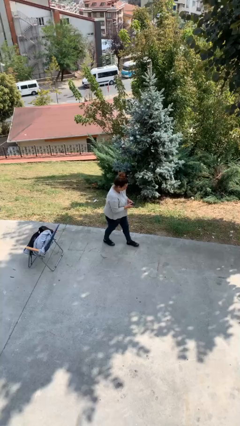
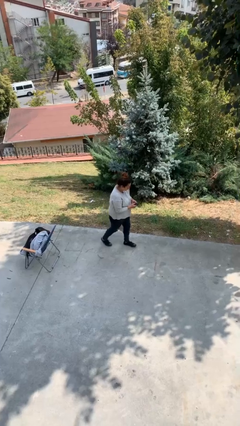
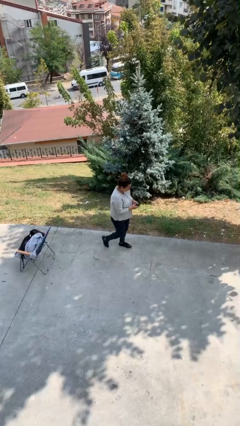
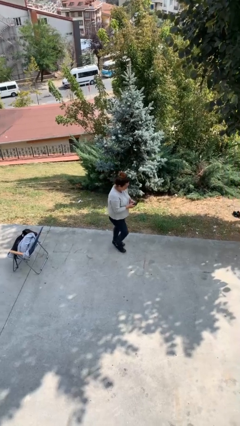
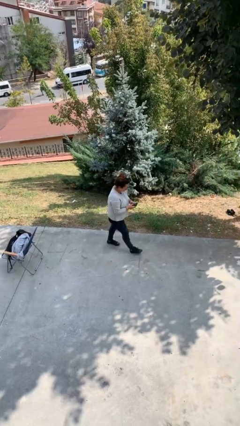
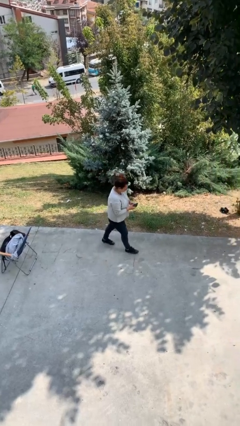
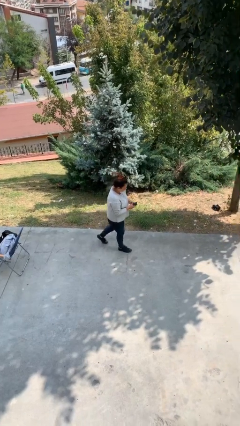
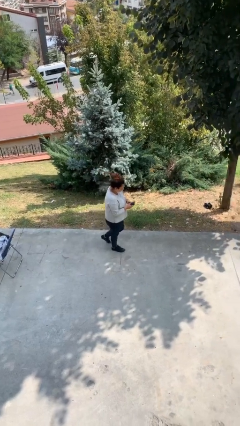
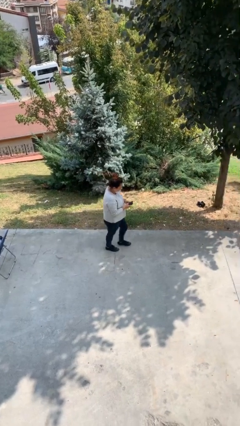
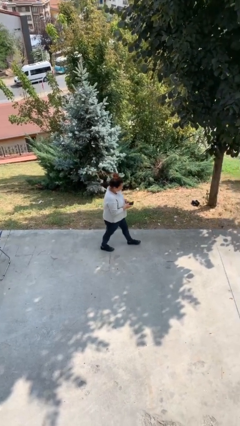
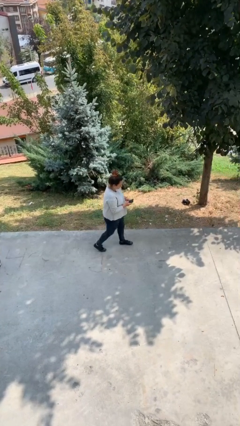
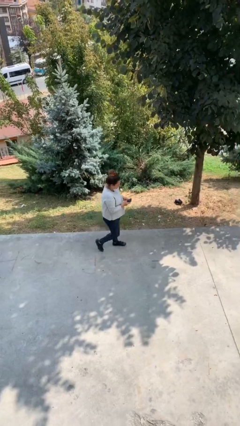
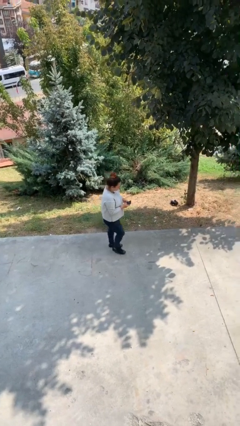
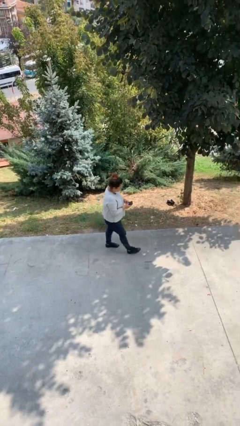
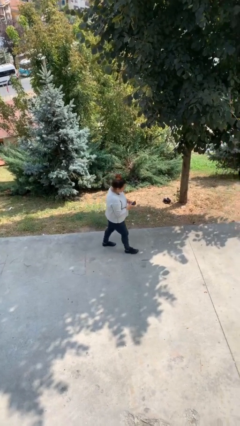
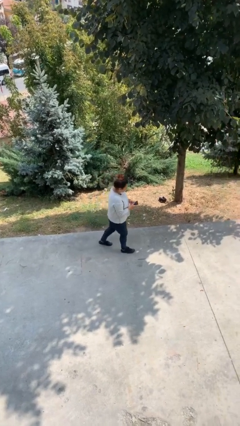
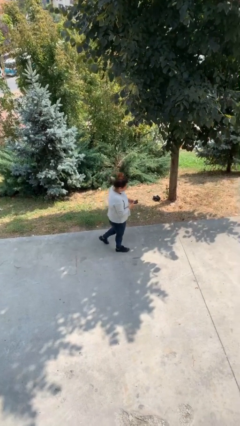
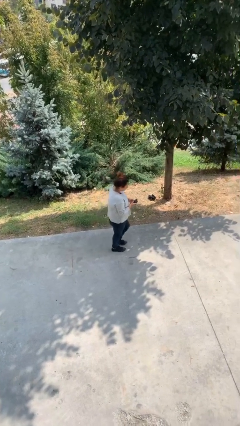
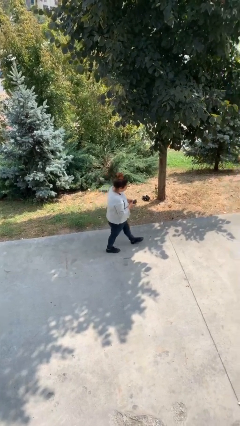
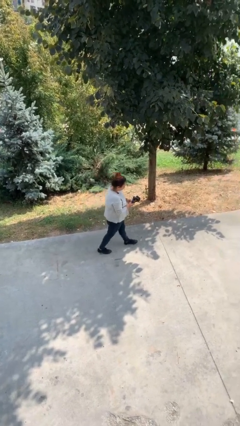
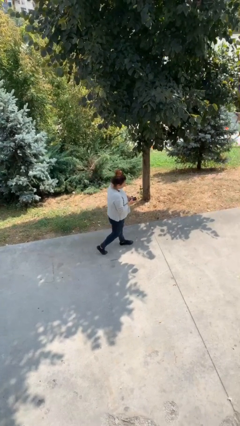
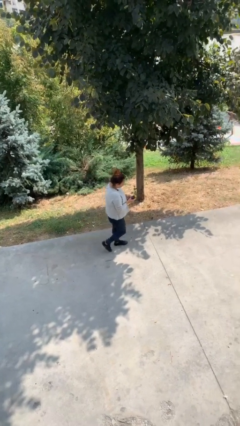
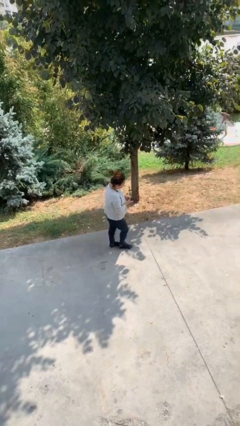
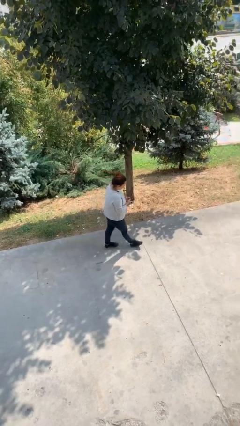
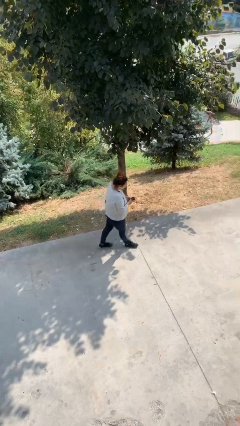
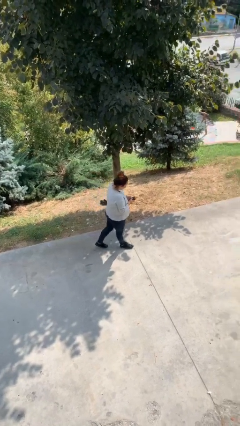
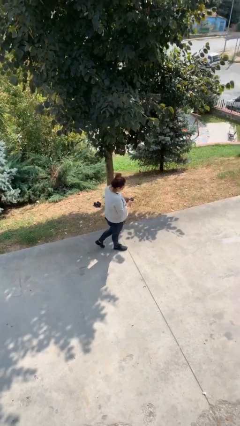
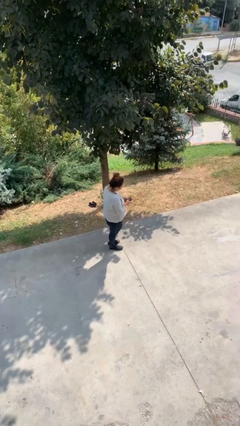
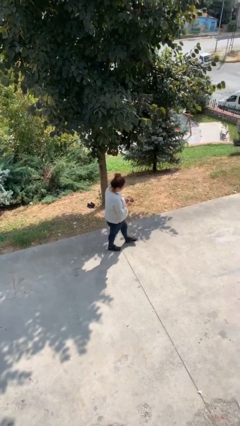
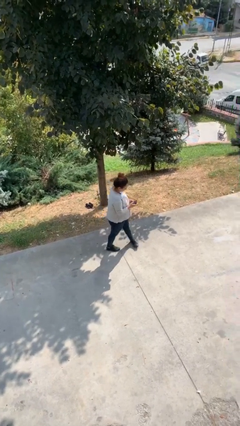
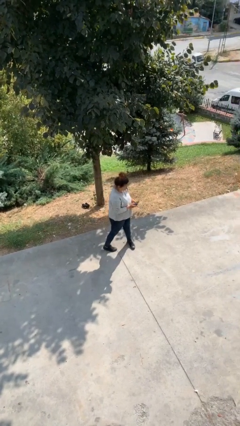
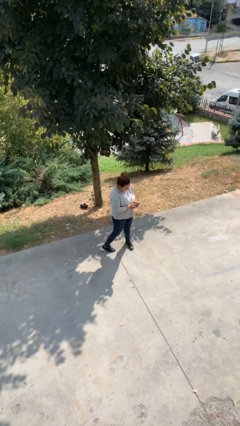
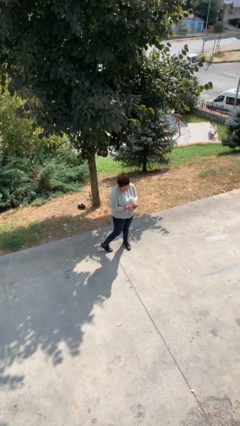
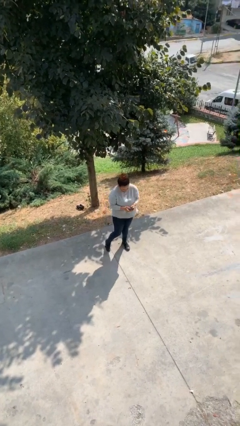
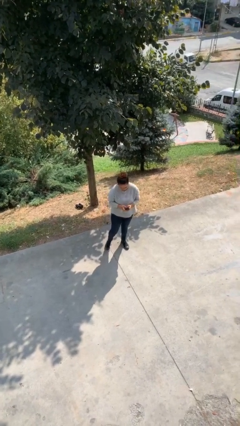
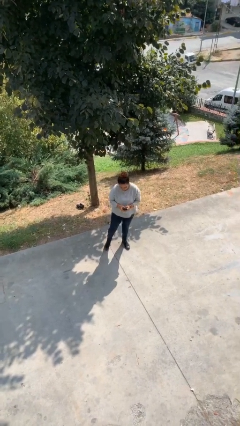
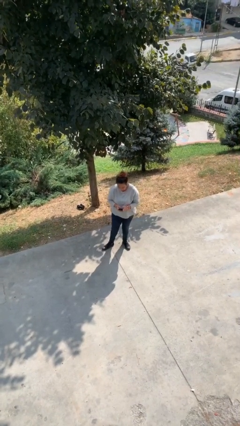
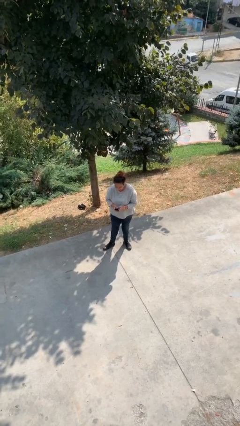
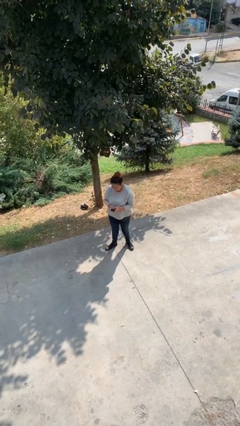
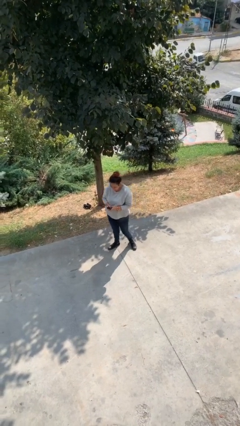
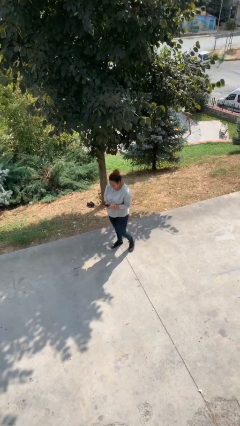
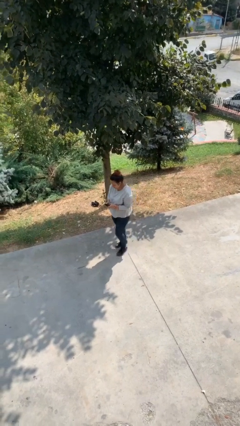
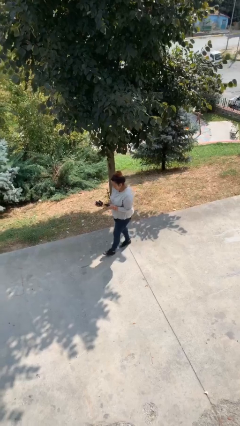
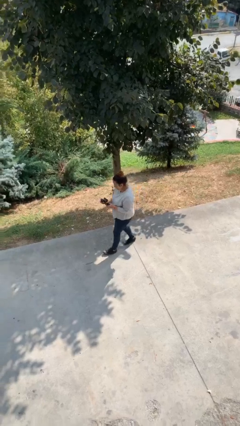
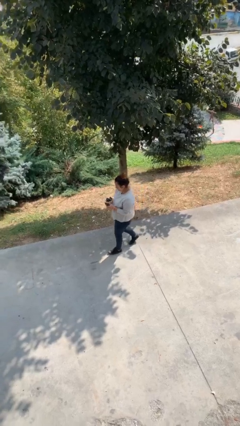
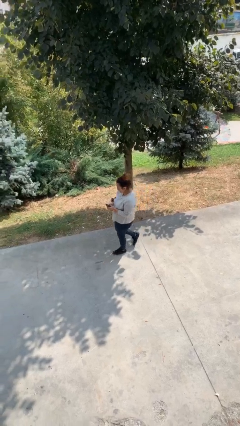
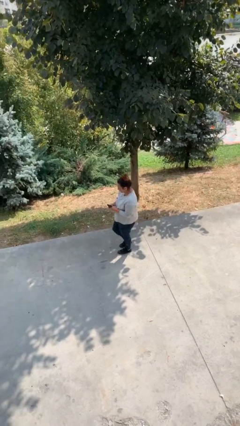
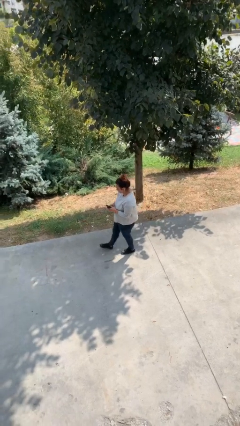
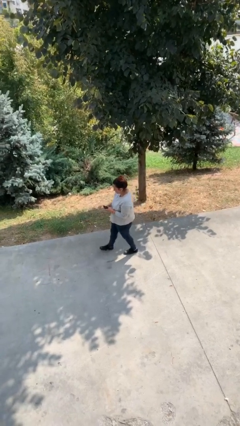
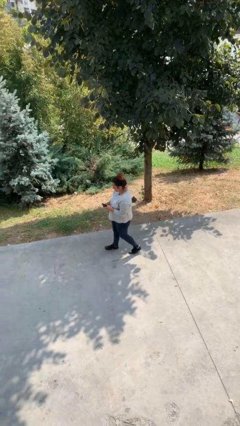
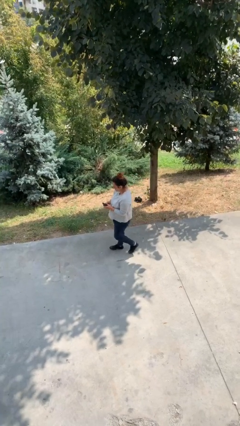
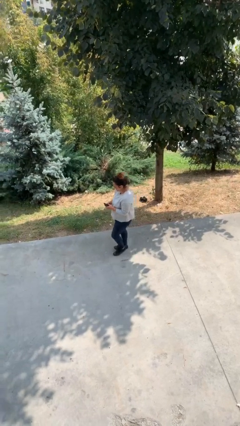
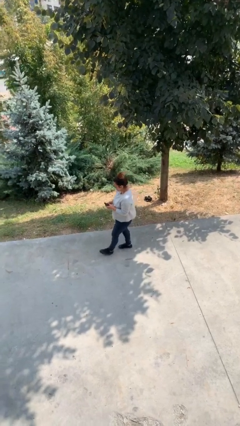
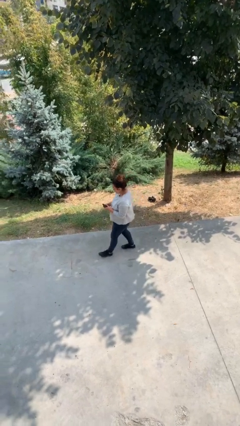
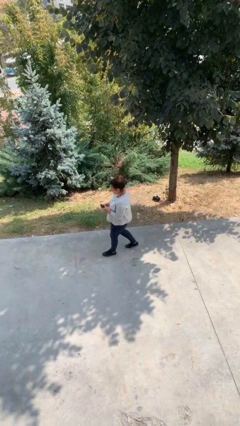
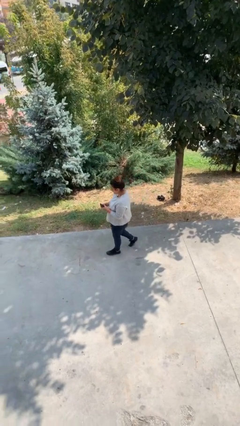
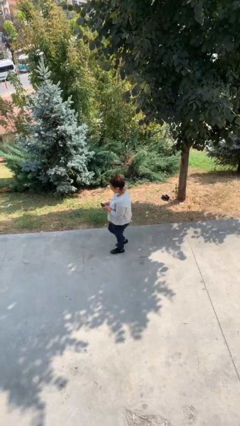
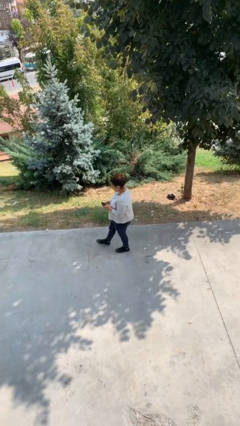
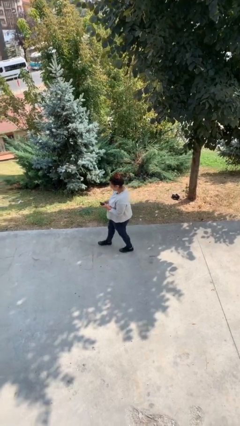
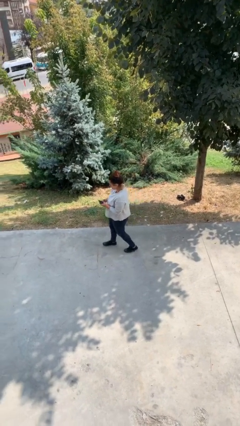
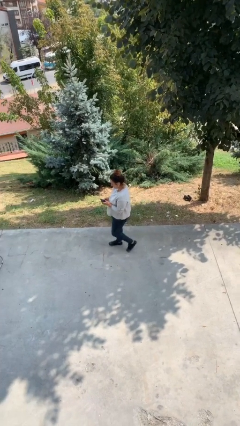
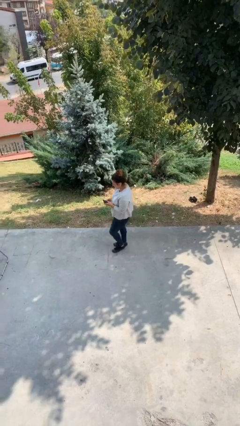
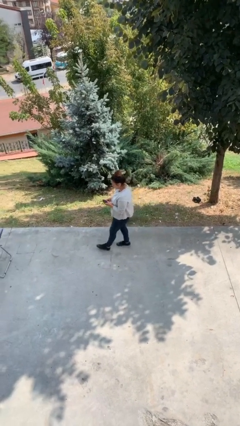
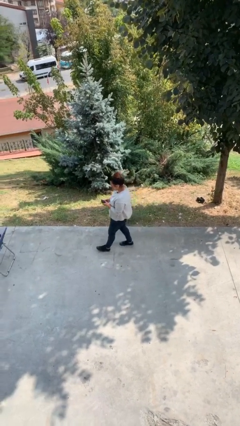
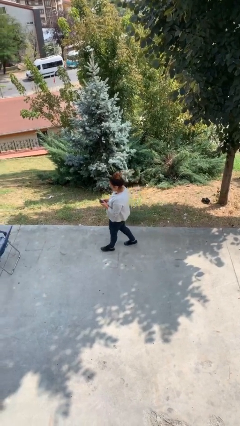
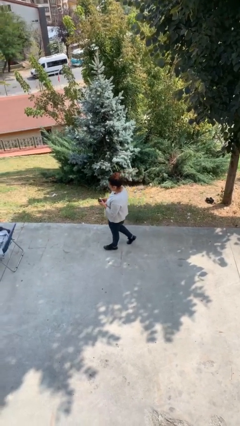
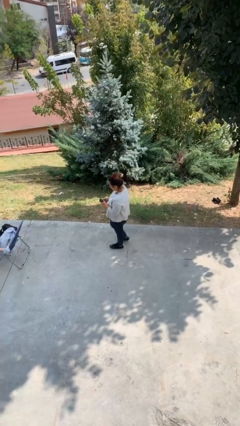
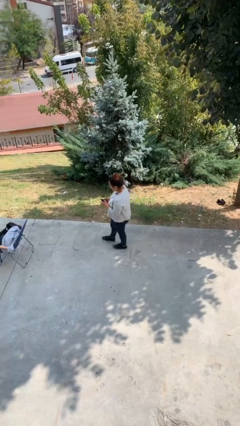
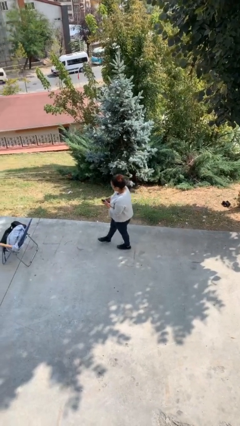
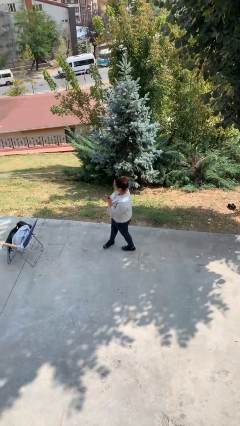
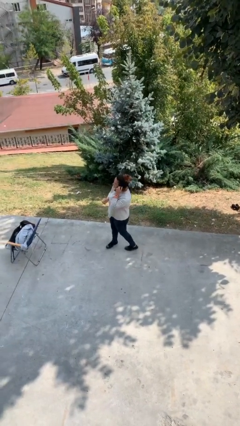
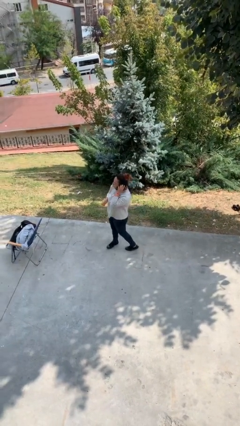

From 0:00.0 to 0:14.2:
person texts on phone

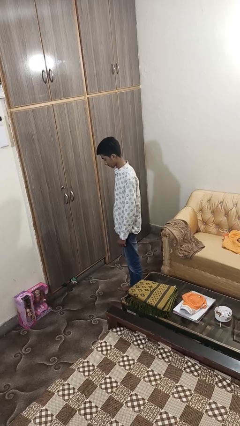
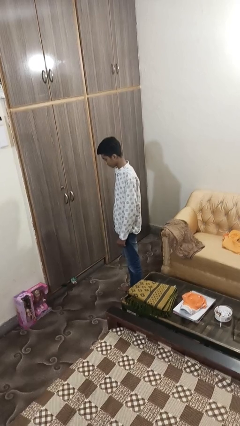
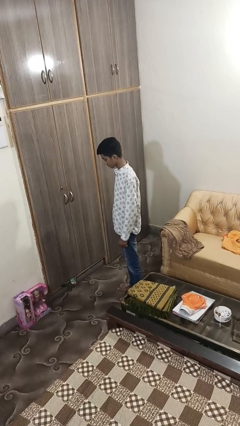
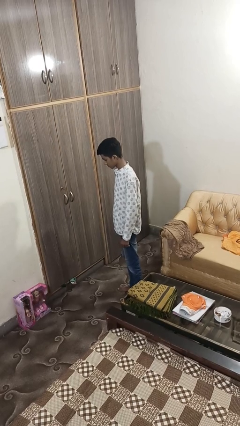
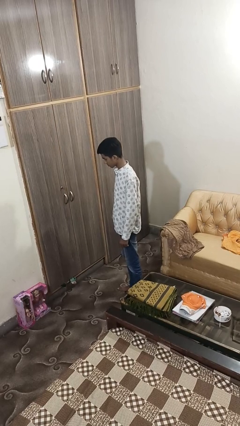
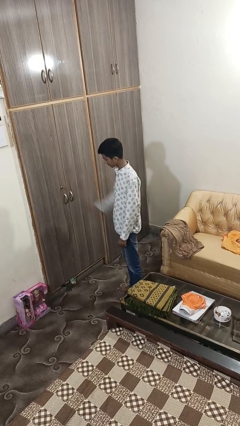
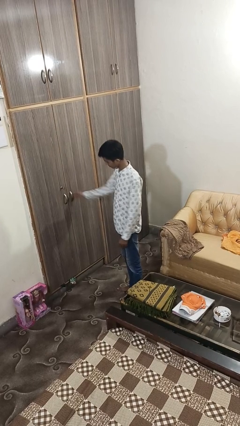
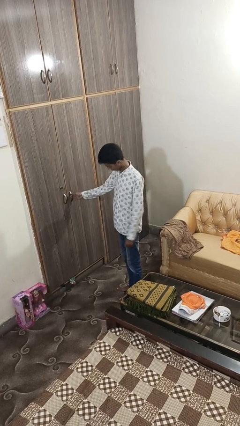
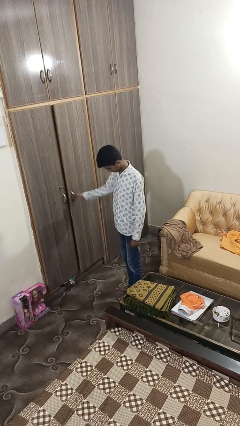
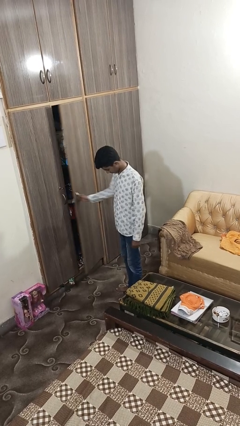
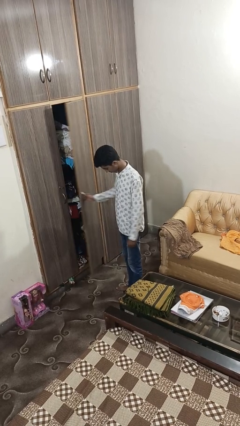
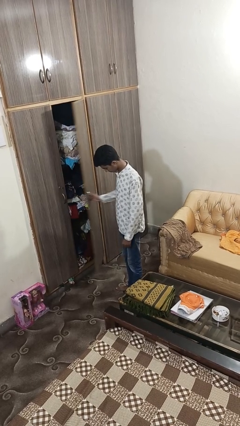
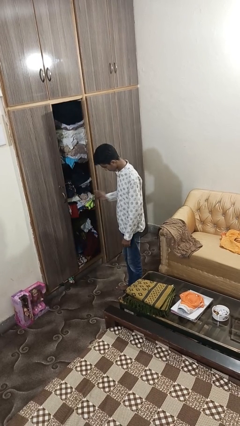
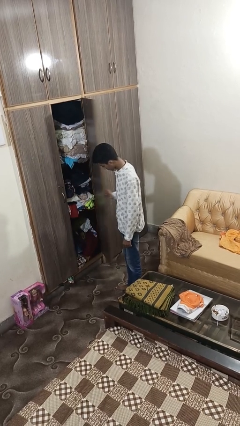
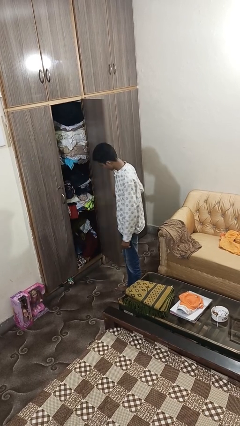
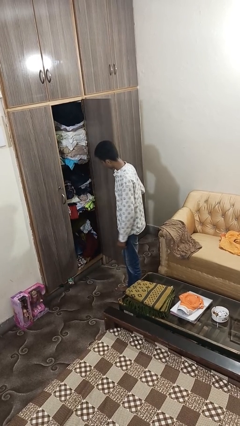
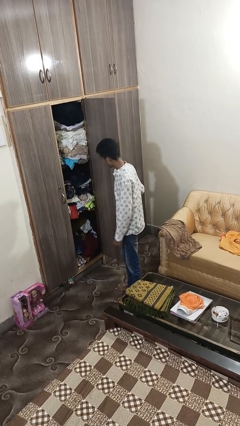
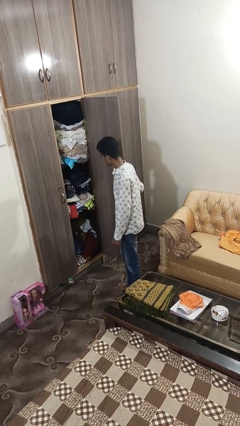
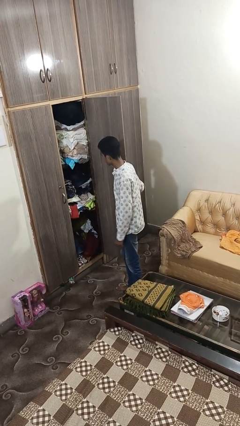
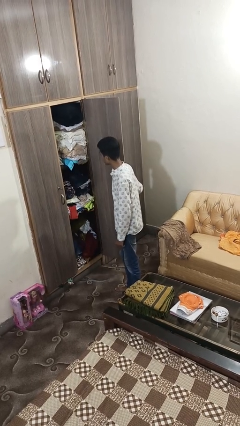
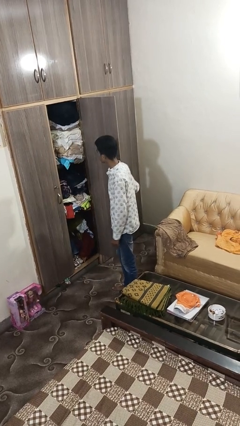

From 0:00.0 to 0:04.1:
person opens closet door
